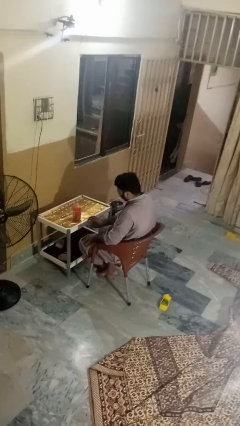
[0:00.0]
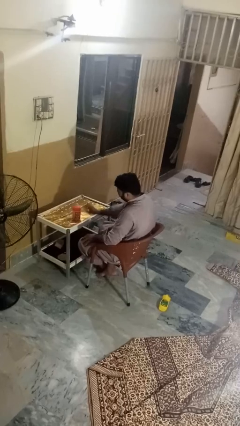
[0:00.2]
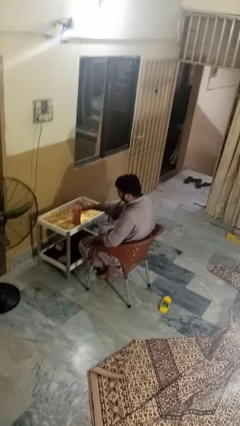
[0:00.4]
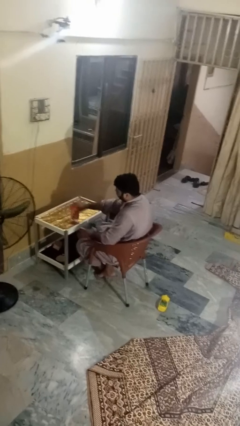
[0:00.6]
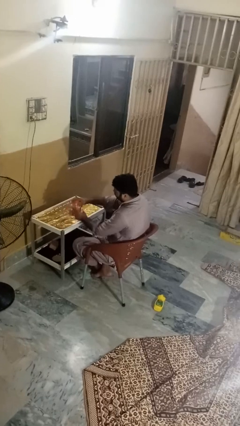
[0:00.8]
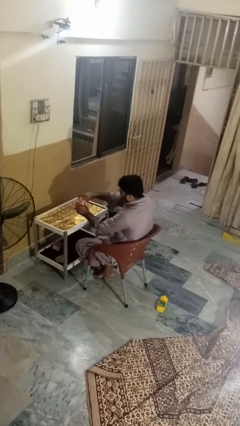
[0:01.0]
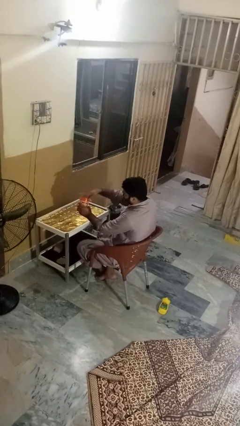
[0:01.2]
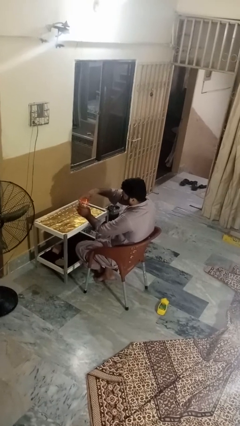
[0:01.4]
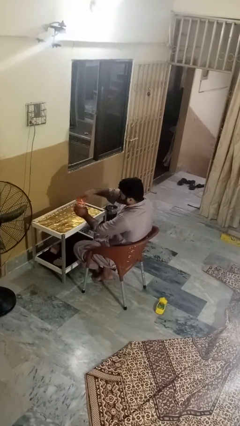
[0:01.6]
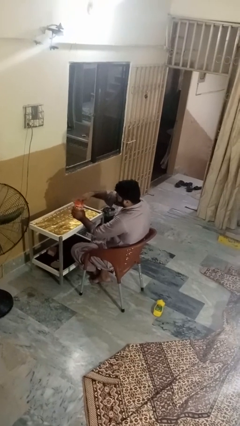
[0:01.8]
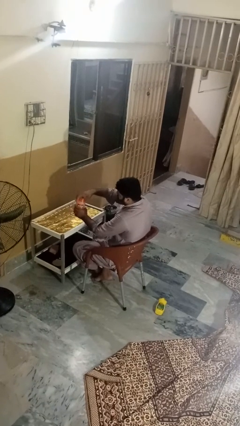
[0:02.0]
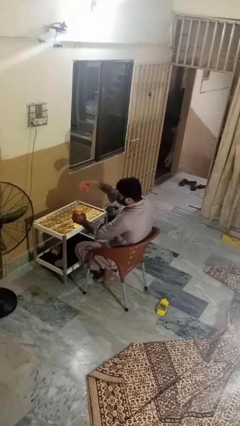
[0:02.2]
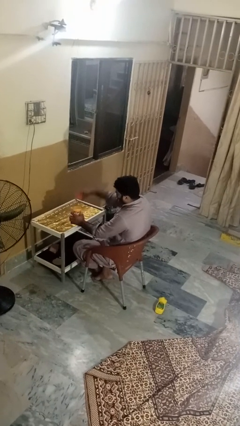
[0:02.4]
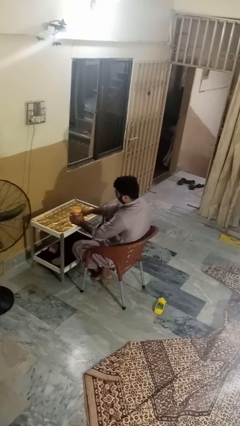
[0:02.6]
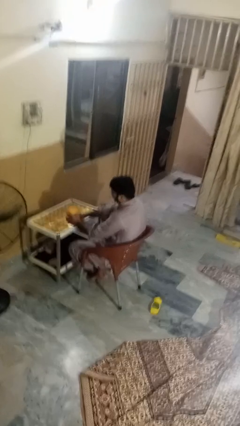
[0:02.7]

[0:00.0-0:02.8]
person opens jar

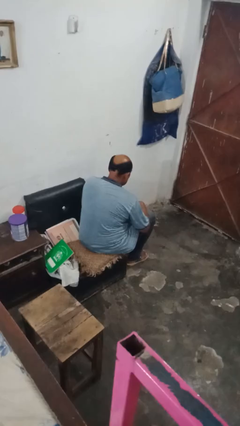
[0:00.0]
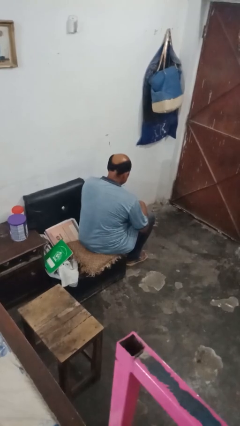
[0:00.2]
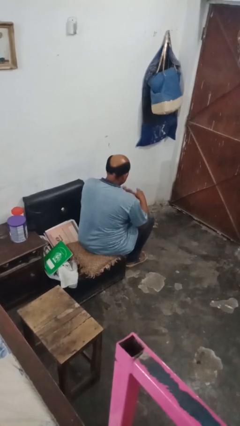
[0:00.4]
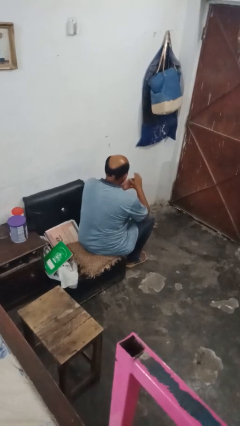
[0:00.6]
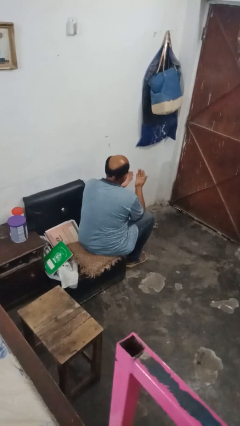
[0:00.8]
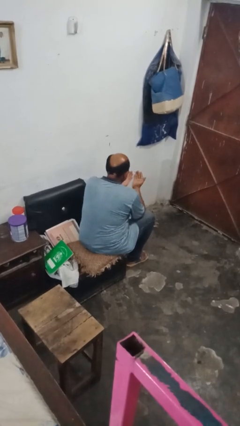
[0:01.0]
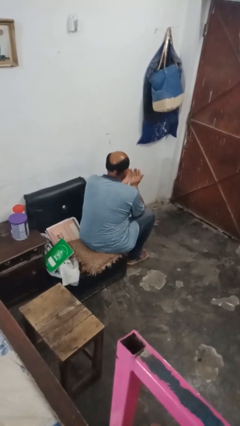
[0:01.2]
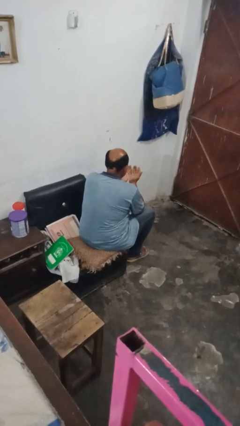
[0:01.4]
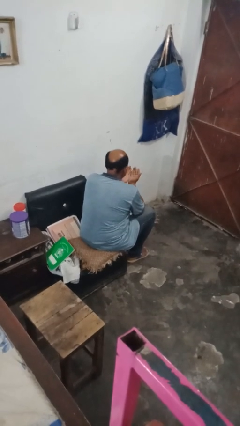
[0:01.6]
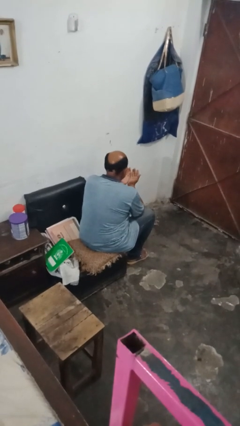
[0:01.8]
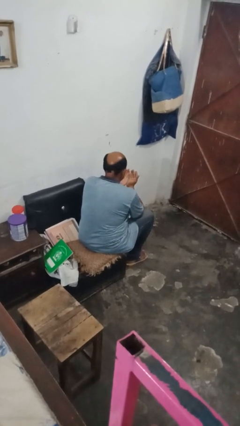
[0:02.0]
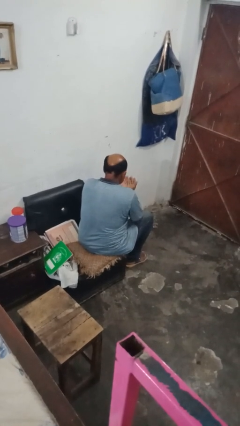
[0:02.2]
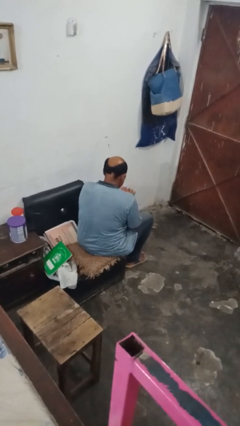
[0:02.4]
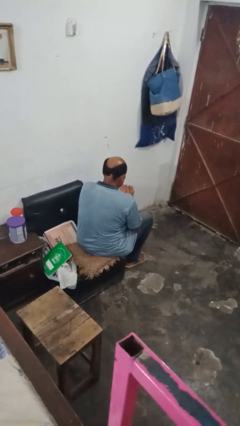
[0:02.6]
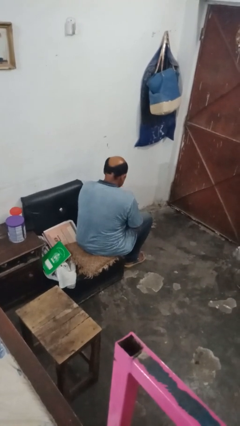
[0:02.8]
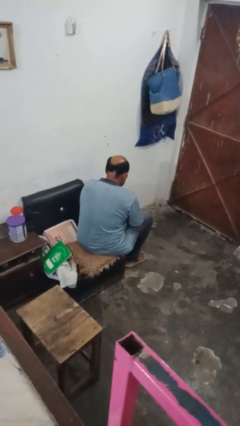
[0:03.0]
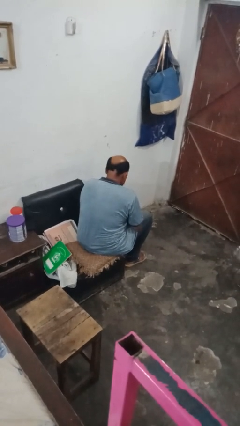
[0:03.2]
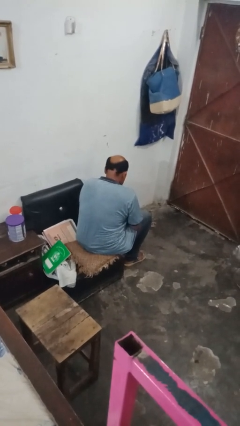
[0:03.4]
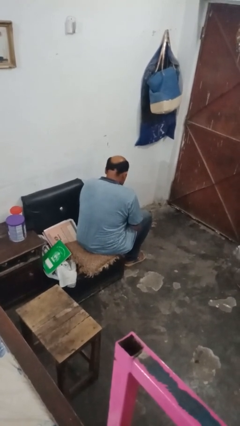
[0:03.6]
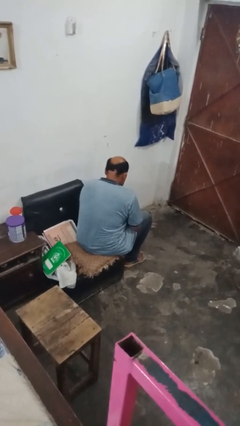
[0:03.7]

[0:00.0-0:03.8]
person looks at hands in lap

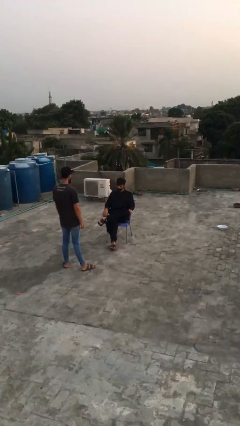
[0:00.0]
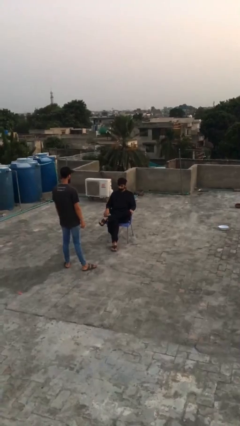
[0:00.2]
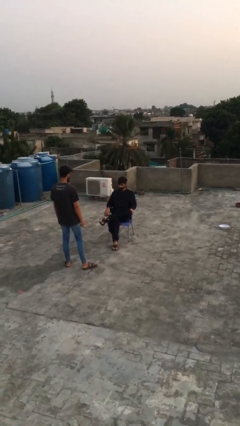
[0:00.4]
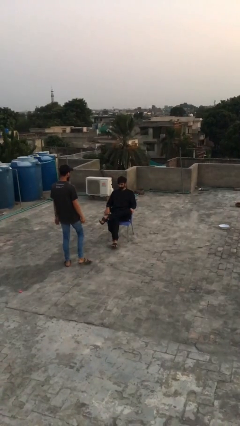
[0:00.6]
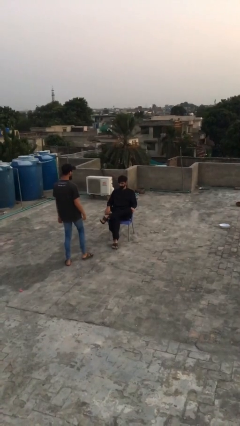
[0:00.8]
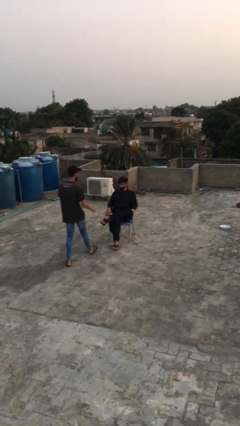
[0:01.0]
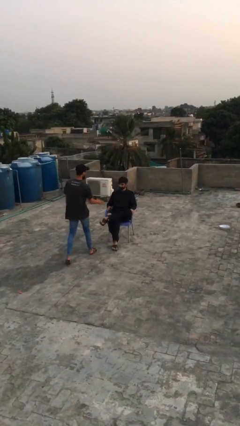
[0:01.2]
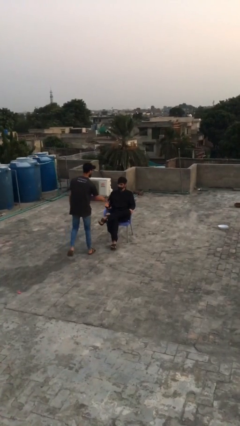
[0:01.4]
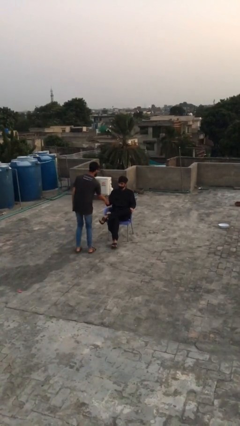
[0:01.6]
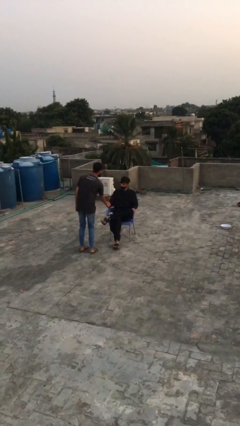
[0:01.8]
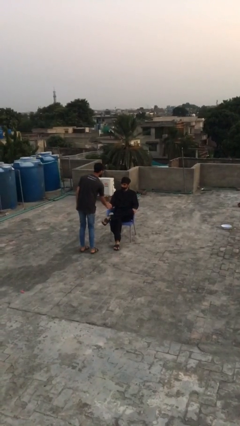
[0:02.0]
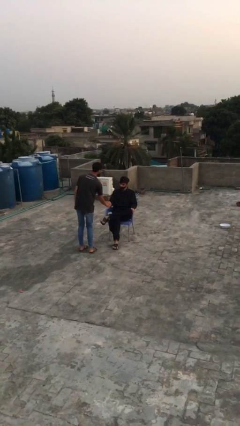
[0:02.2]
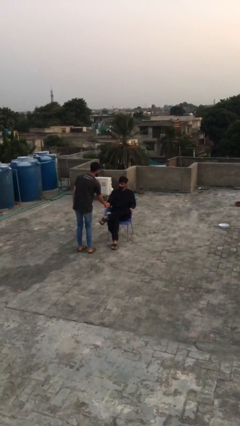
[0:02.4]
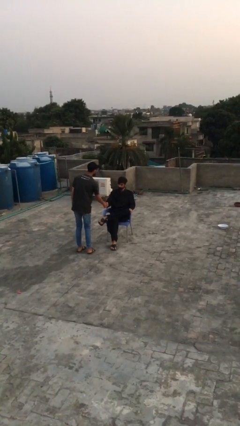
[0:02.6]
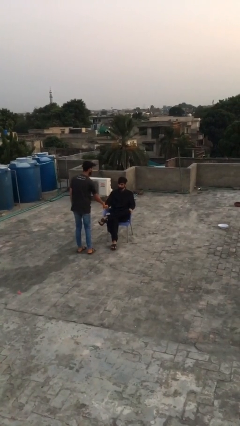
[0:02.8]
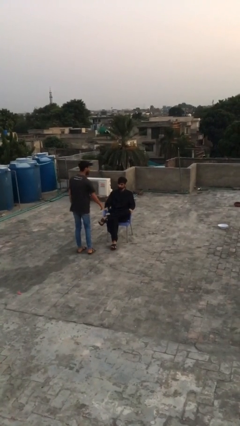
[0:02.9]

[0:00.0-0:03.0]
person shakes hand

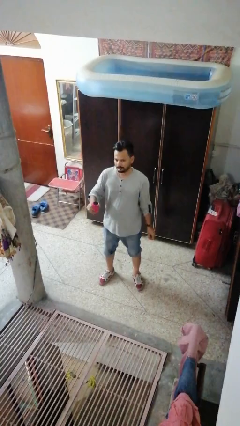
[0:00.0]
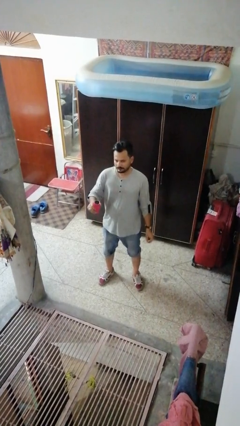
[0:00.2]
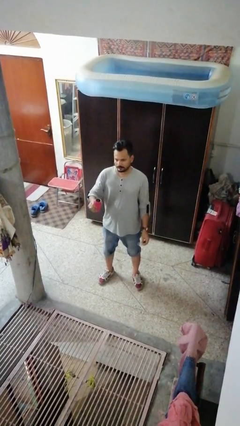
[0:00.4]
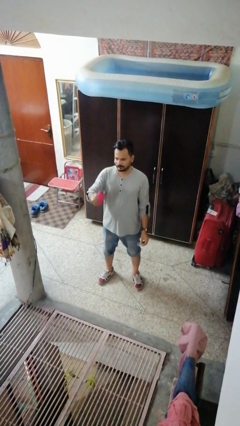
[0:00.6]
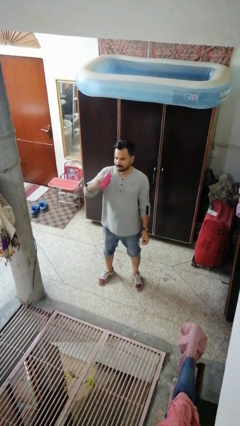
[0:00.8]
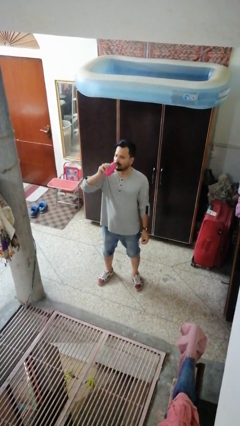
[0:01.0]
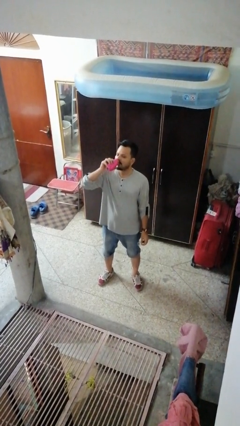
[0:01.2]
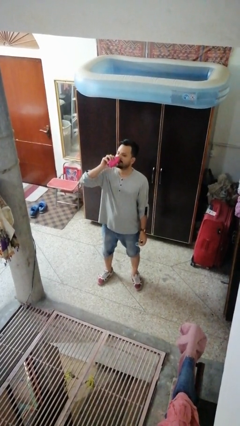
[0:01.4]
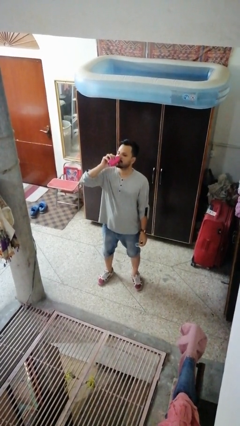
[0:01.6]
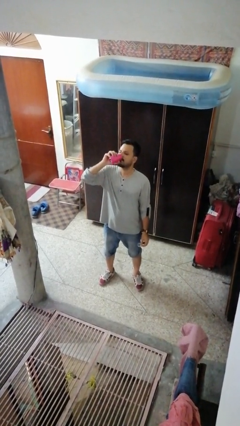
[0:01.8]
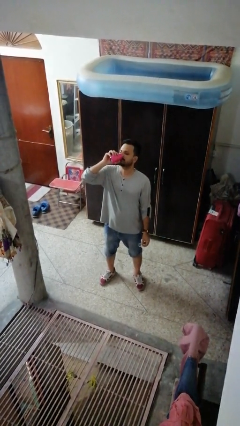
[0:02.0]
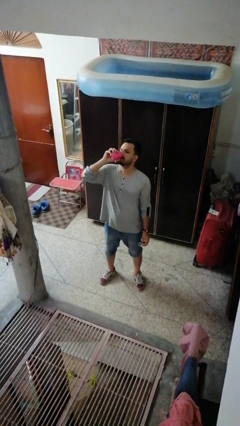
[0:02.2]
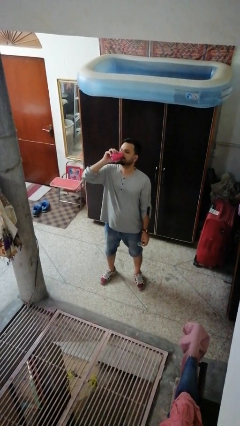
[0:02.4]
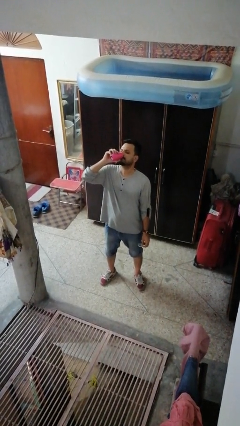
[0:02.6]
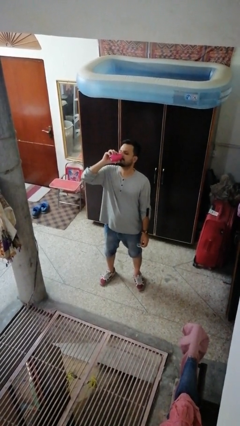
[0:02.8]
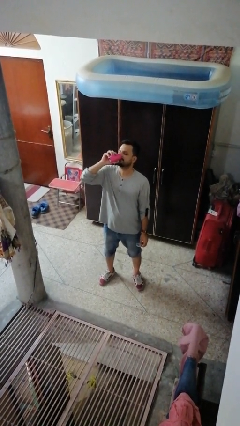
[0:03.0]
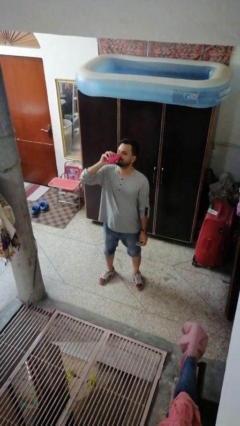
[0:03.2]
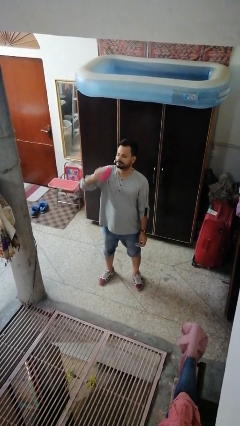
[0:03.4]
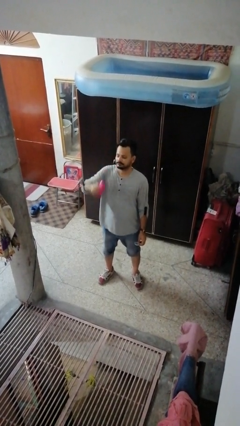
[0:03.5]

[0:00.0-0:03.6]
person drinks from beverage can

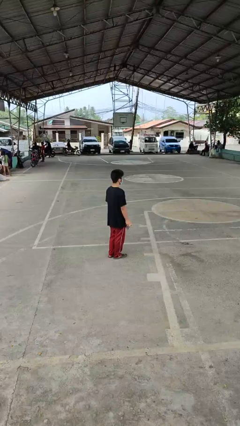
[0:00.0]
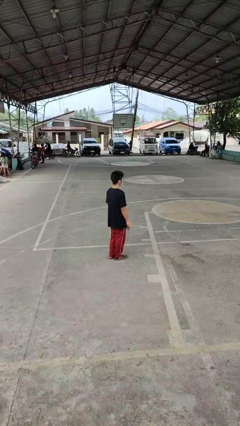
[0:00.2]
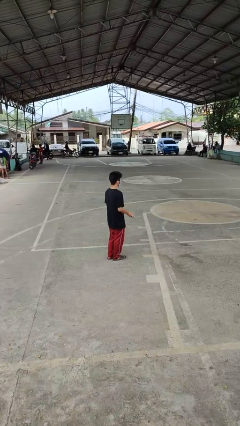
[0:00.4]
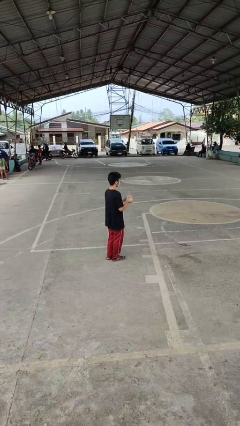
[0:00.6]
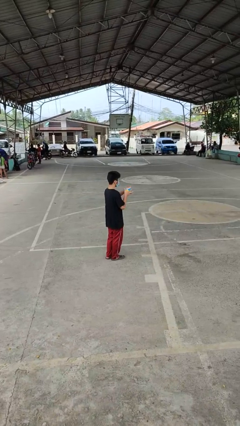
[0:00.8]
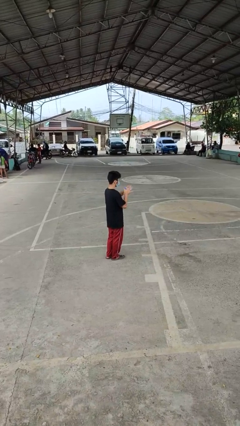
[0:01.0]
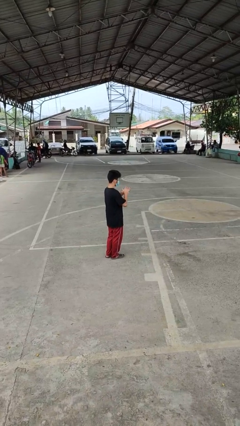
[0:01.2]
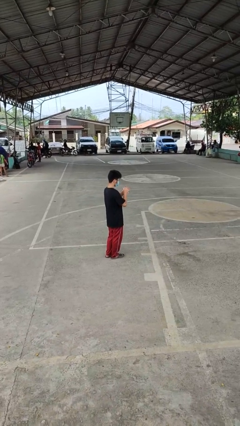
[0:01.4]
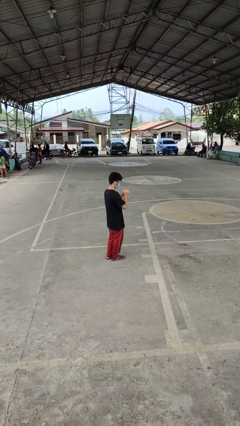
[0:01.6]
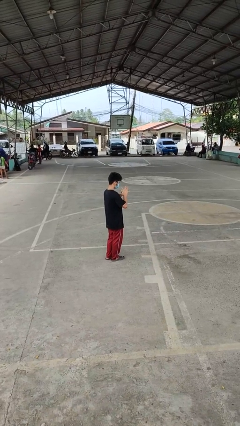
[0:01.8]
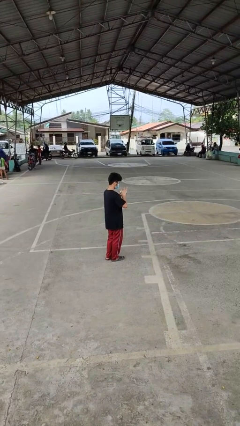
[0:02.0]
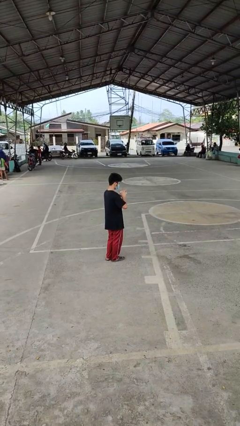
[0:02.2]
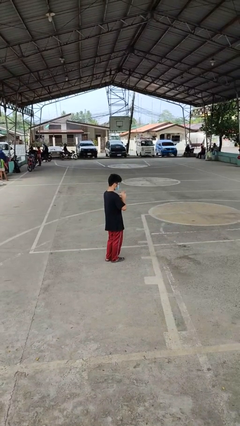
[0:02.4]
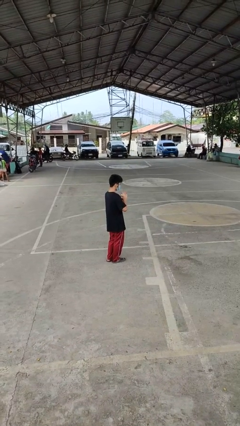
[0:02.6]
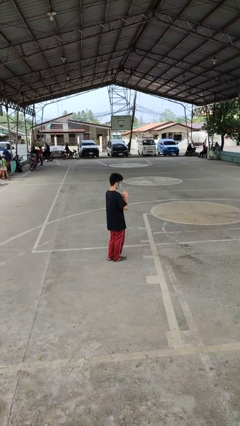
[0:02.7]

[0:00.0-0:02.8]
person squeezes object

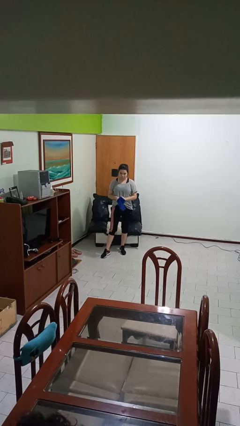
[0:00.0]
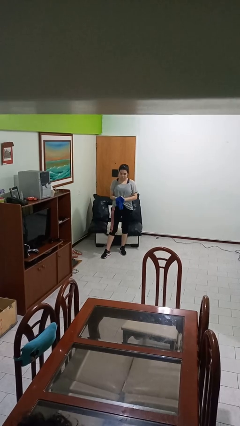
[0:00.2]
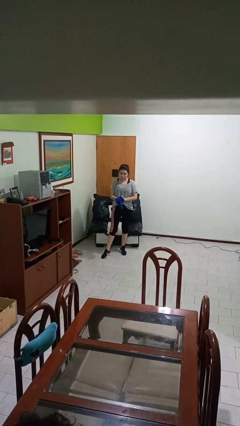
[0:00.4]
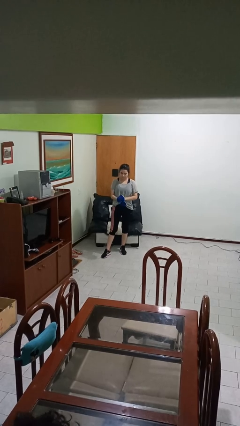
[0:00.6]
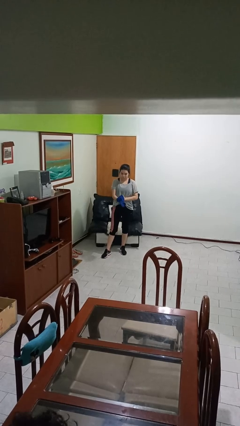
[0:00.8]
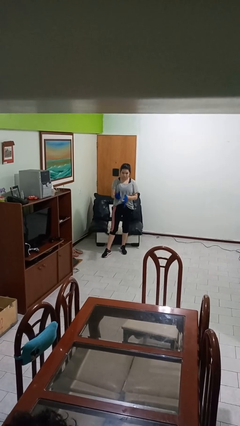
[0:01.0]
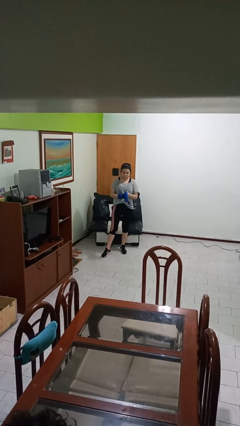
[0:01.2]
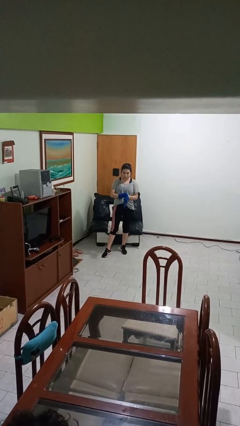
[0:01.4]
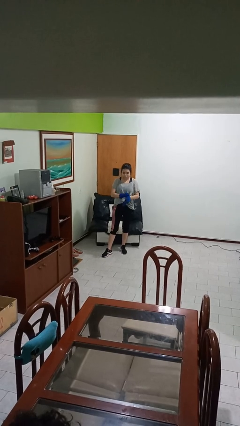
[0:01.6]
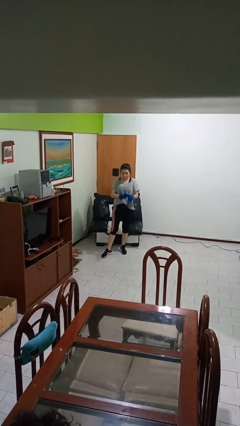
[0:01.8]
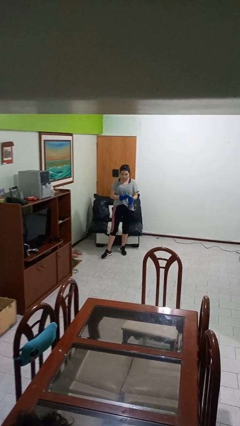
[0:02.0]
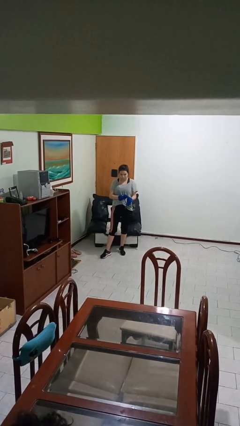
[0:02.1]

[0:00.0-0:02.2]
person puts on gloves
